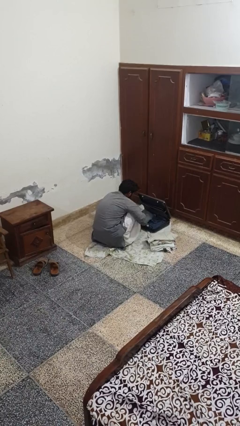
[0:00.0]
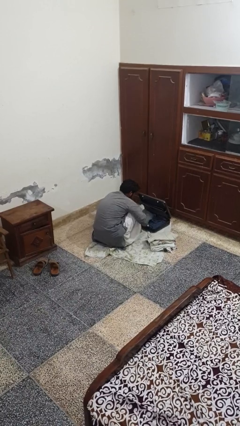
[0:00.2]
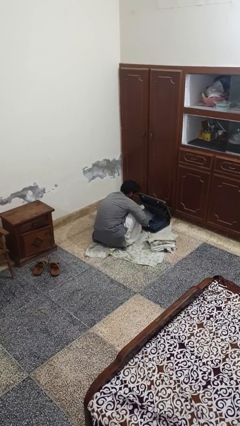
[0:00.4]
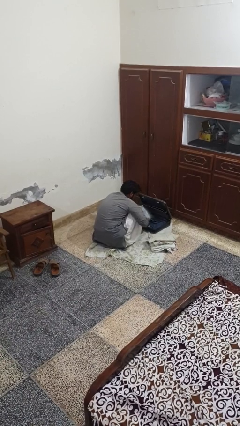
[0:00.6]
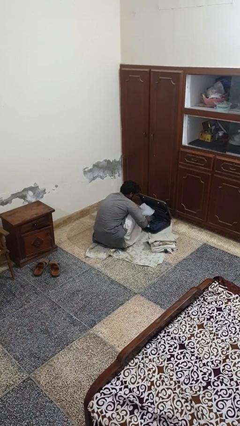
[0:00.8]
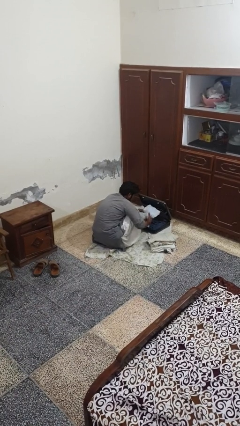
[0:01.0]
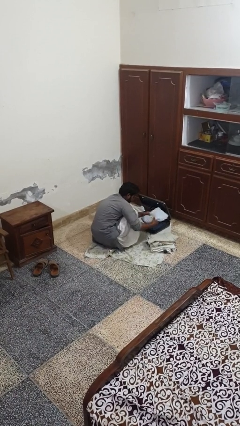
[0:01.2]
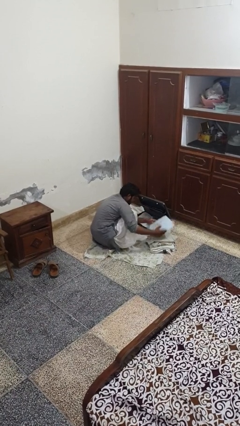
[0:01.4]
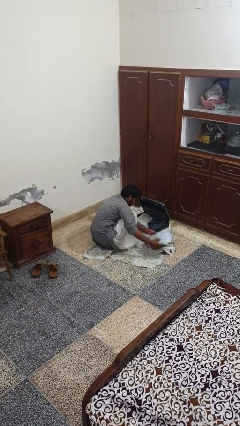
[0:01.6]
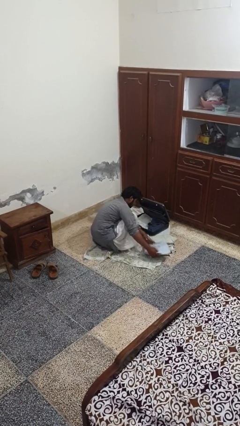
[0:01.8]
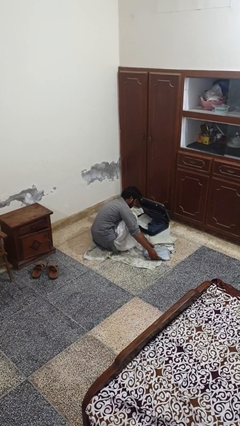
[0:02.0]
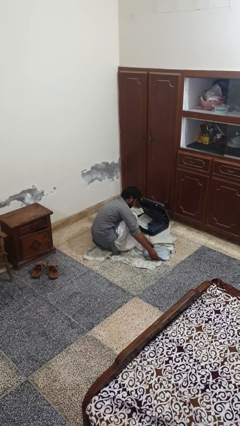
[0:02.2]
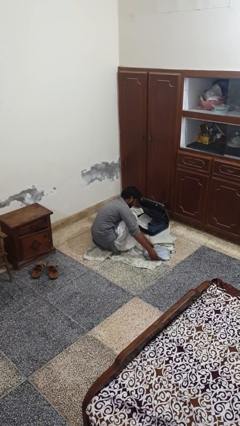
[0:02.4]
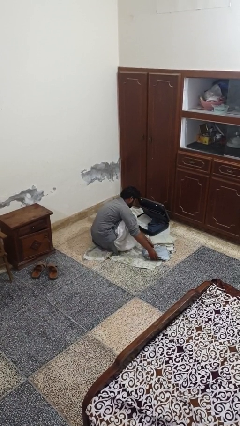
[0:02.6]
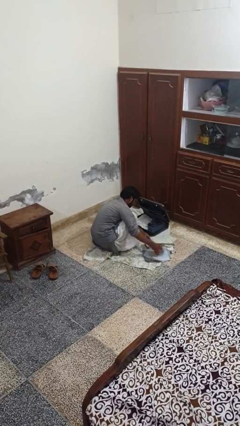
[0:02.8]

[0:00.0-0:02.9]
person unloads clothes from suitcase

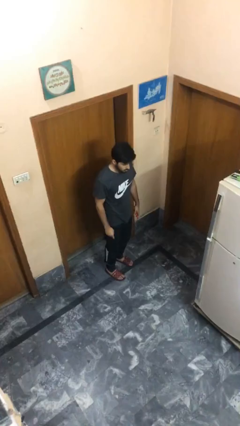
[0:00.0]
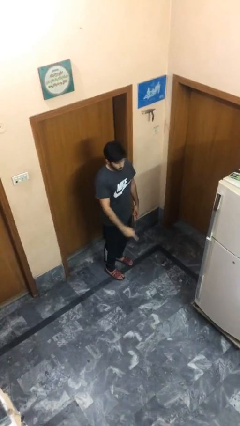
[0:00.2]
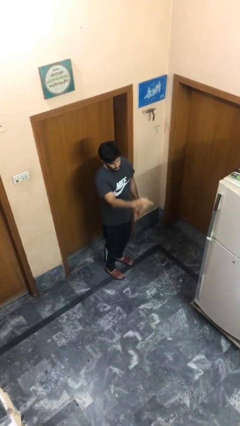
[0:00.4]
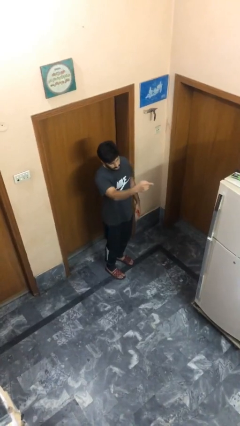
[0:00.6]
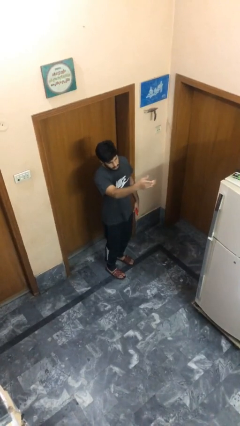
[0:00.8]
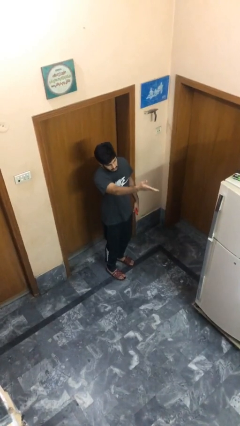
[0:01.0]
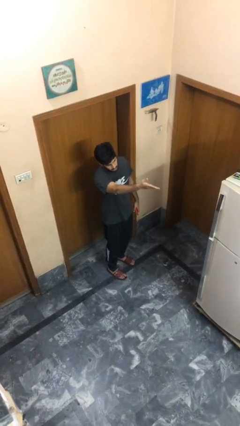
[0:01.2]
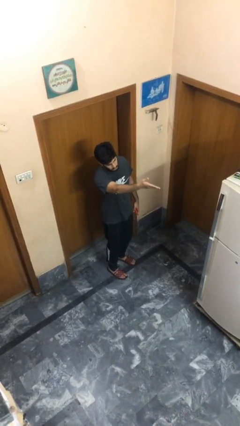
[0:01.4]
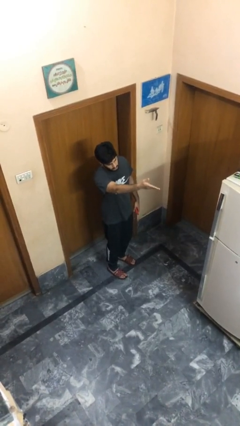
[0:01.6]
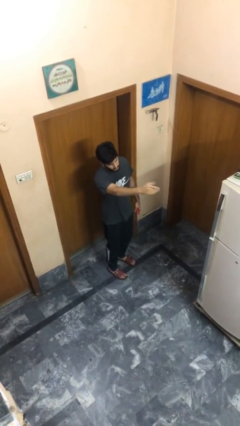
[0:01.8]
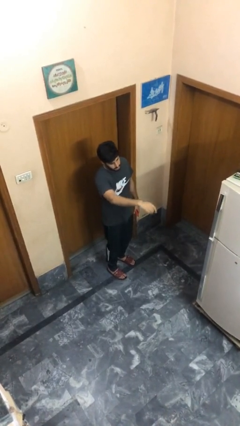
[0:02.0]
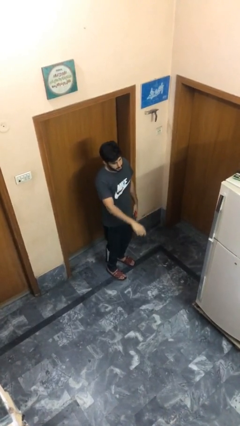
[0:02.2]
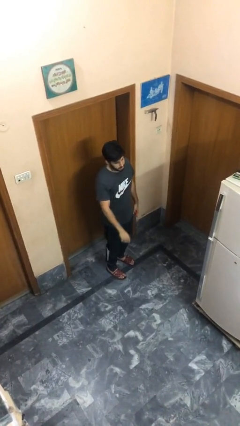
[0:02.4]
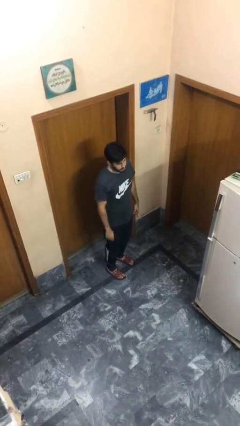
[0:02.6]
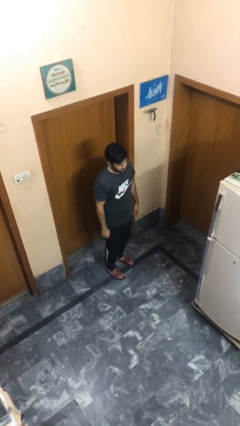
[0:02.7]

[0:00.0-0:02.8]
person points at person

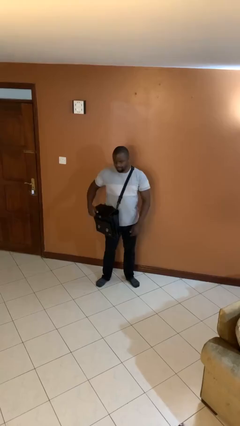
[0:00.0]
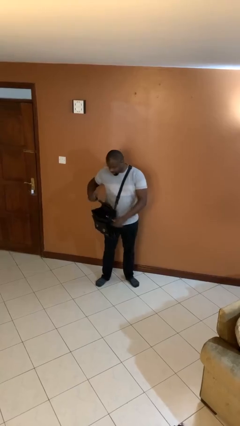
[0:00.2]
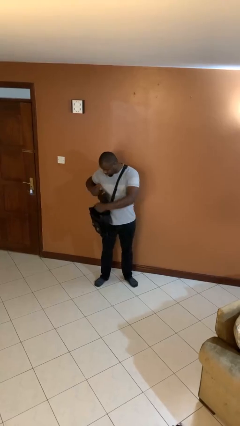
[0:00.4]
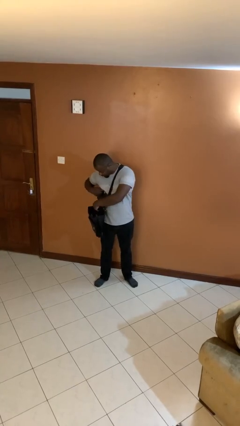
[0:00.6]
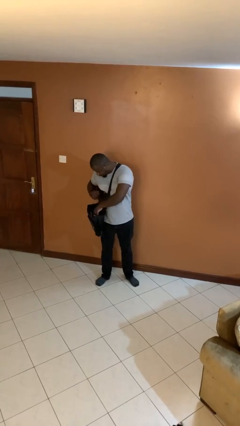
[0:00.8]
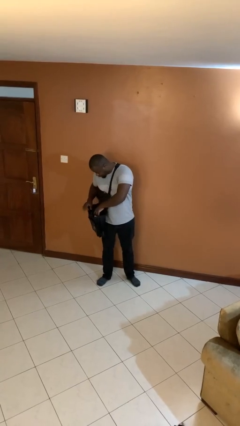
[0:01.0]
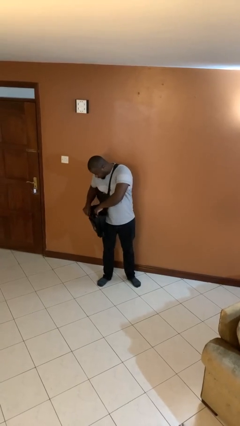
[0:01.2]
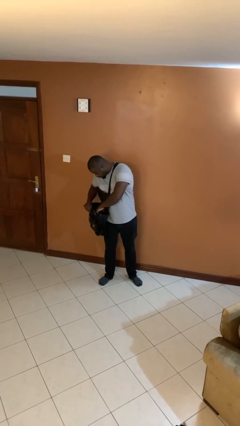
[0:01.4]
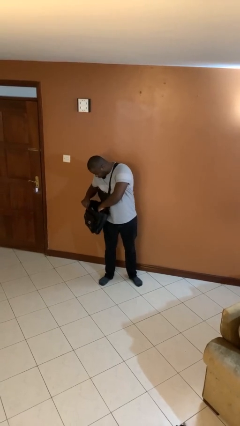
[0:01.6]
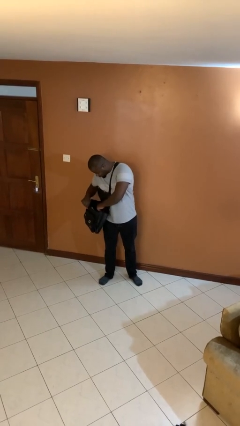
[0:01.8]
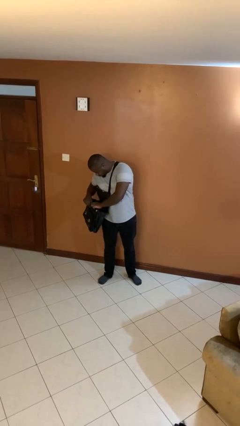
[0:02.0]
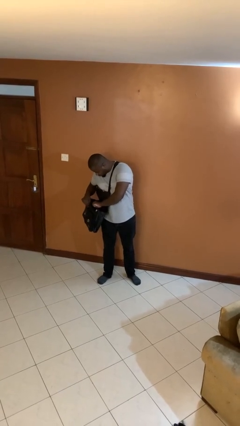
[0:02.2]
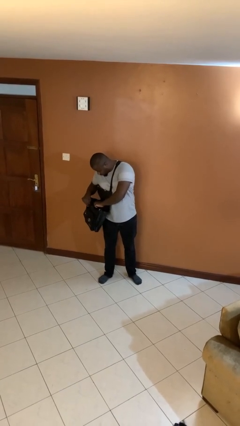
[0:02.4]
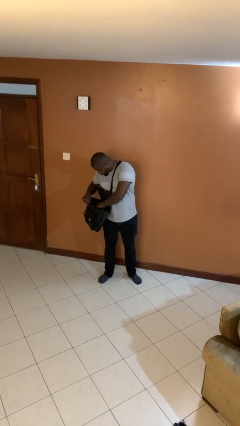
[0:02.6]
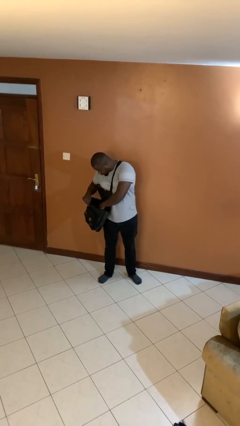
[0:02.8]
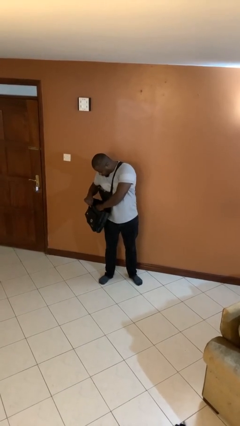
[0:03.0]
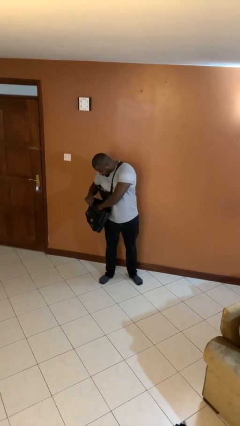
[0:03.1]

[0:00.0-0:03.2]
person searches in purse

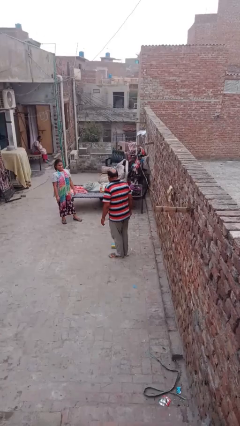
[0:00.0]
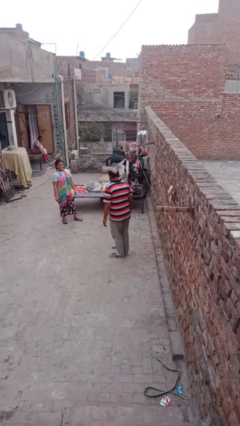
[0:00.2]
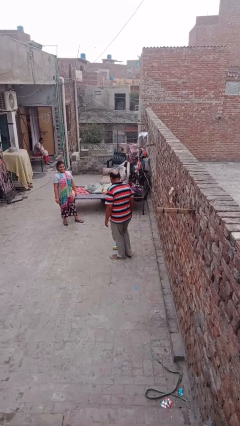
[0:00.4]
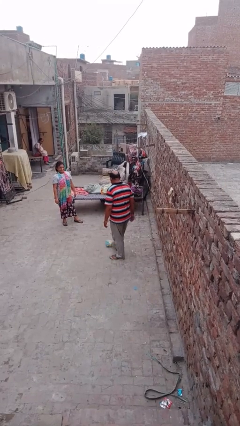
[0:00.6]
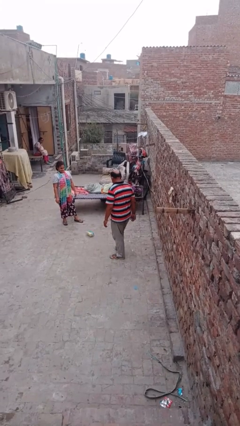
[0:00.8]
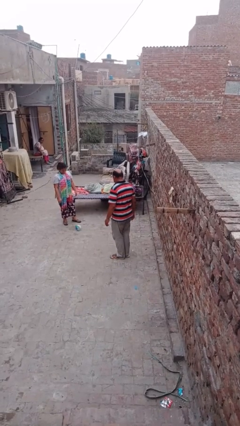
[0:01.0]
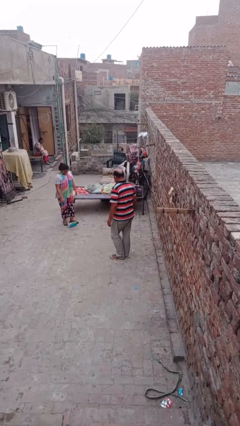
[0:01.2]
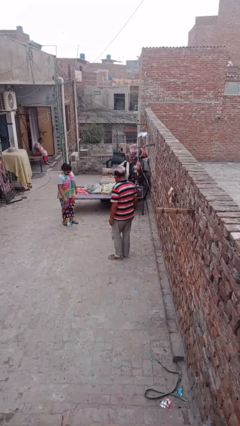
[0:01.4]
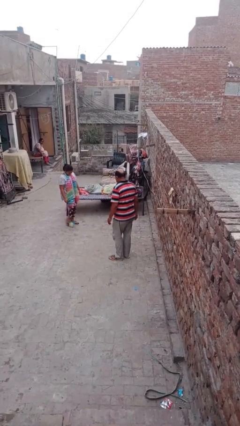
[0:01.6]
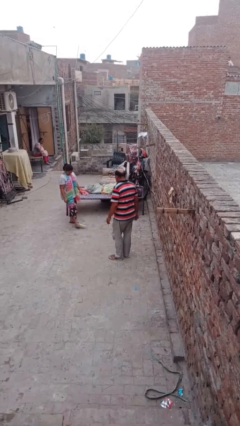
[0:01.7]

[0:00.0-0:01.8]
person kicks object to person

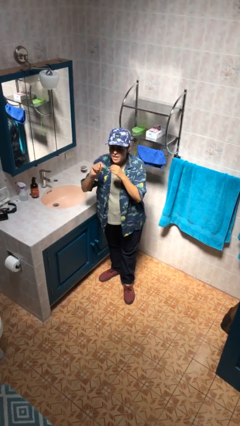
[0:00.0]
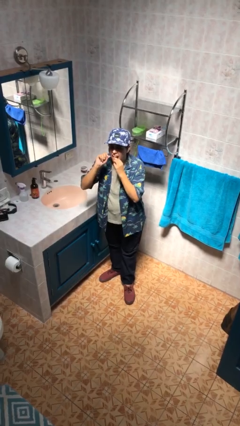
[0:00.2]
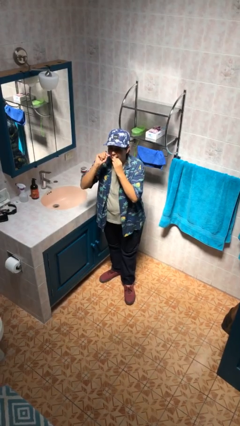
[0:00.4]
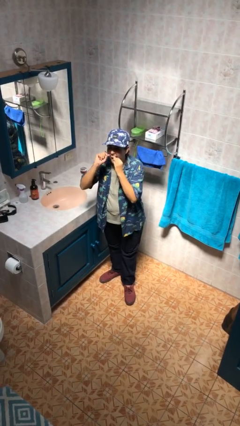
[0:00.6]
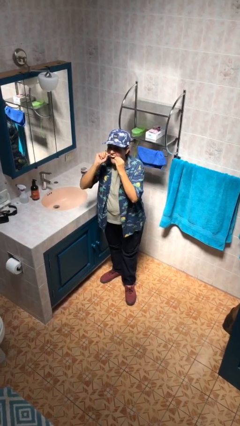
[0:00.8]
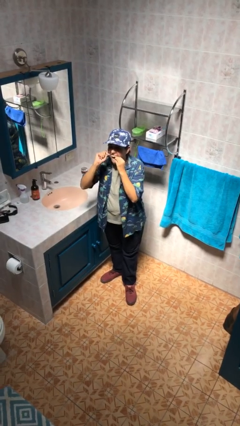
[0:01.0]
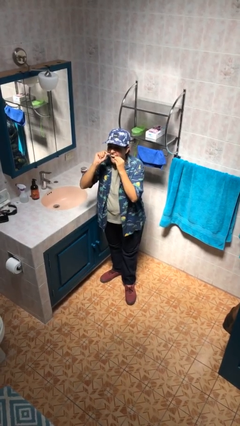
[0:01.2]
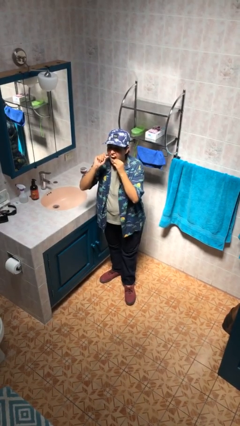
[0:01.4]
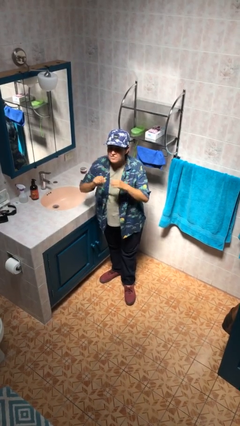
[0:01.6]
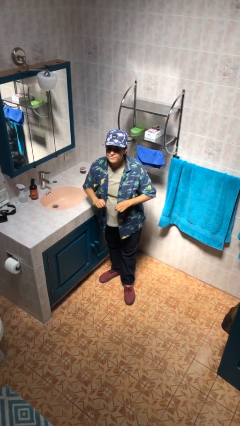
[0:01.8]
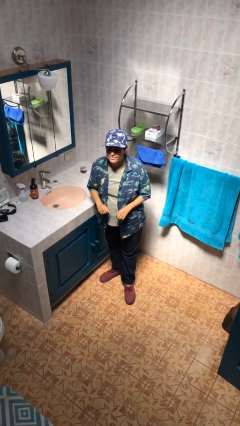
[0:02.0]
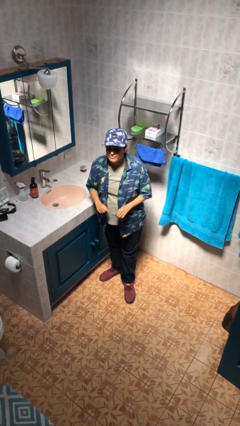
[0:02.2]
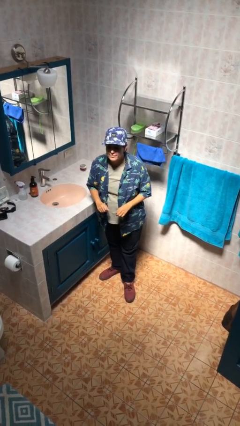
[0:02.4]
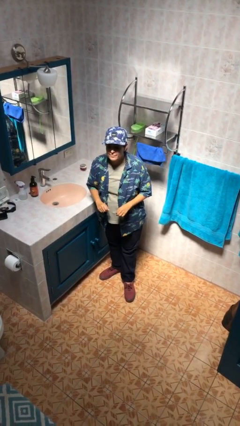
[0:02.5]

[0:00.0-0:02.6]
person flosses

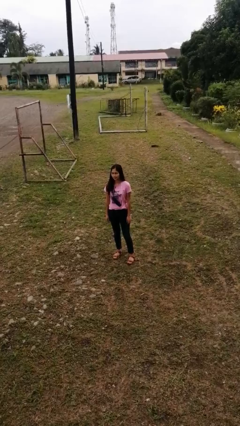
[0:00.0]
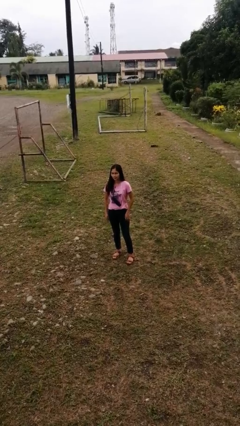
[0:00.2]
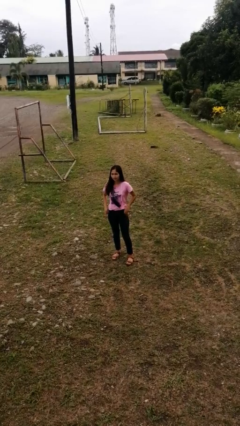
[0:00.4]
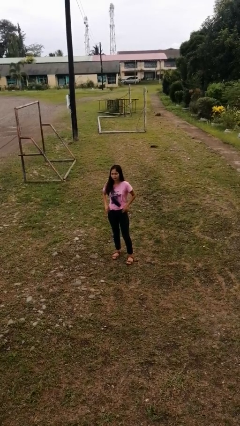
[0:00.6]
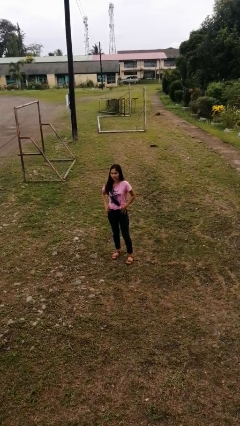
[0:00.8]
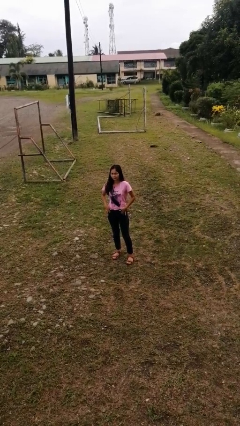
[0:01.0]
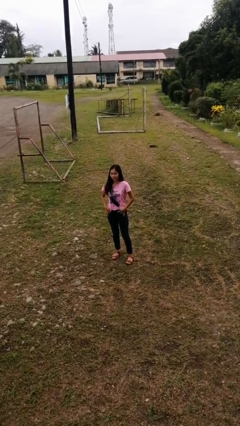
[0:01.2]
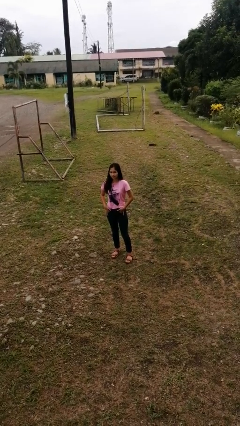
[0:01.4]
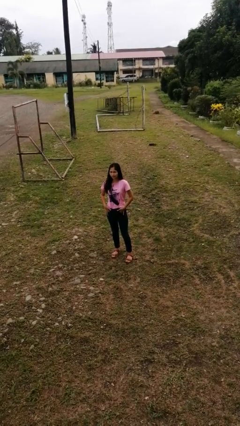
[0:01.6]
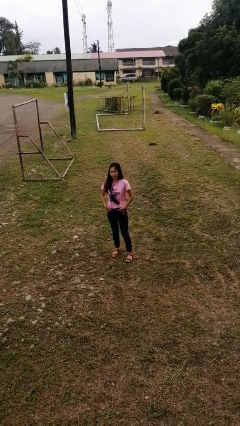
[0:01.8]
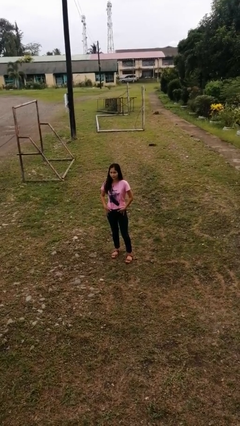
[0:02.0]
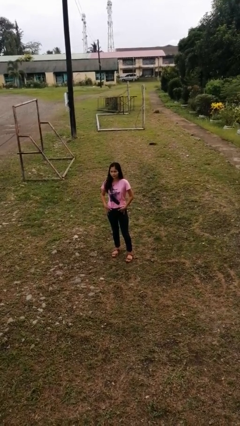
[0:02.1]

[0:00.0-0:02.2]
person puts hands in back pockets

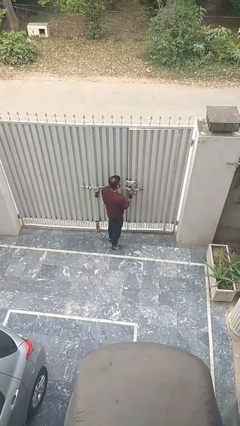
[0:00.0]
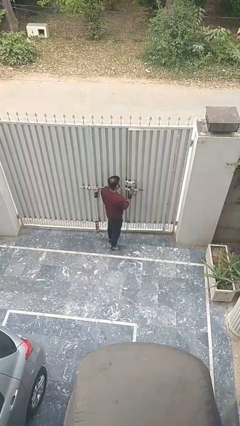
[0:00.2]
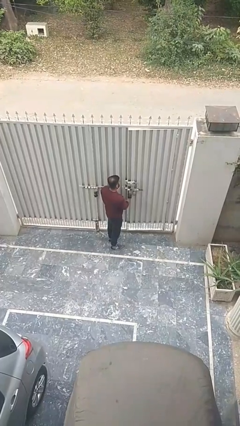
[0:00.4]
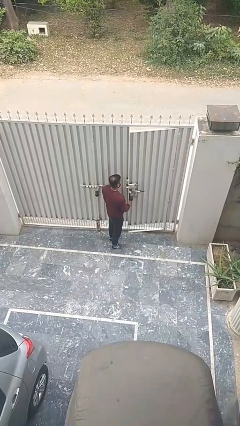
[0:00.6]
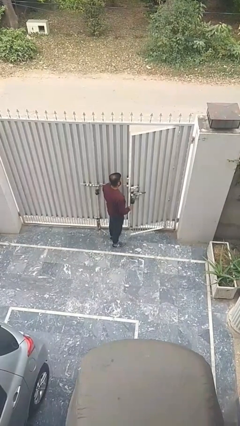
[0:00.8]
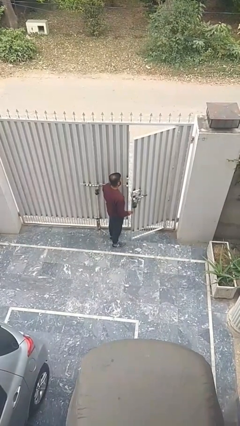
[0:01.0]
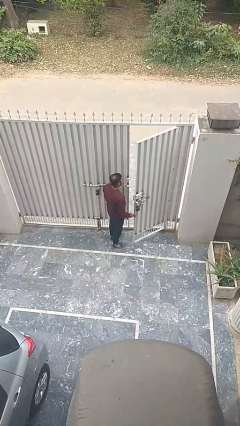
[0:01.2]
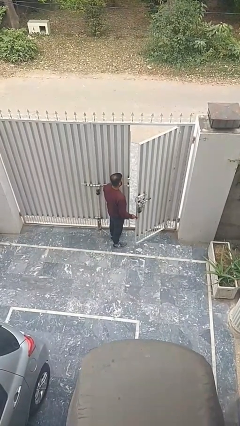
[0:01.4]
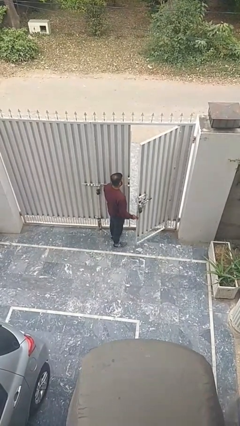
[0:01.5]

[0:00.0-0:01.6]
person opens facility door

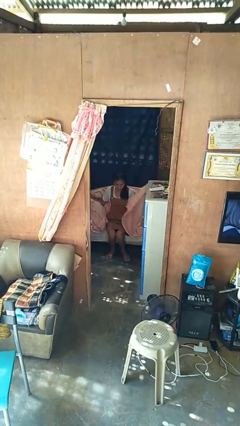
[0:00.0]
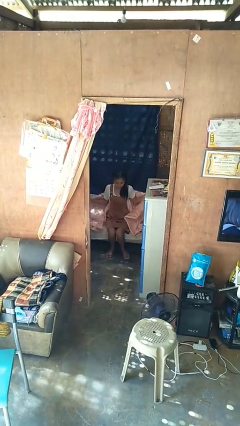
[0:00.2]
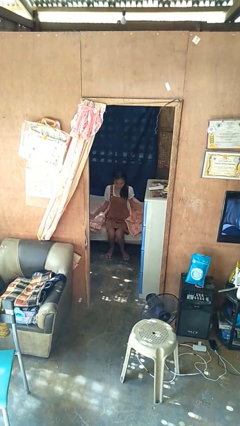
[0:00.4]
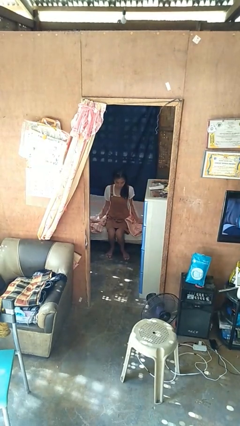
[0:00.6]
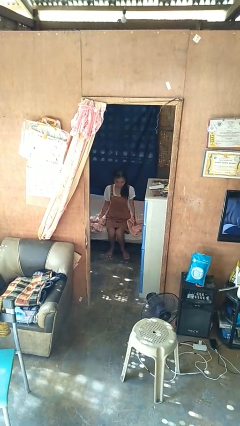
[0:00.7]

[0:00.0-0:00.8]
person uncovers with blanket
